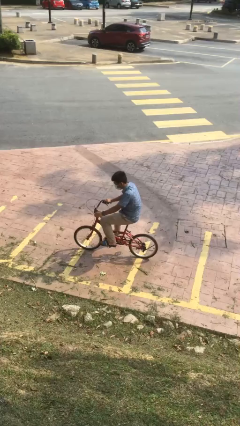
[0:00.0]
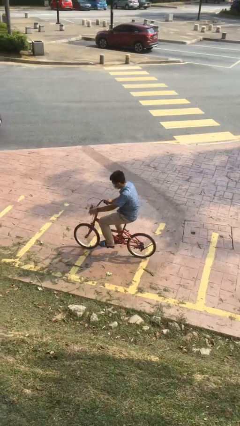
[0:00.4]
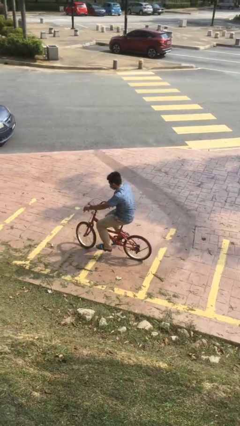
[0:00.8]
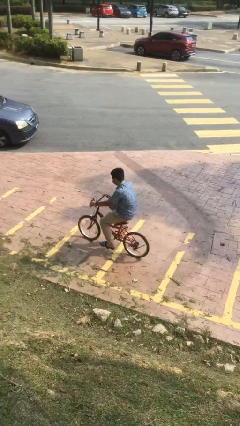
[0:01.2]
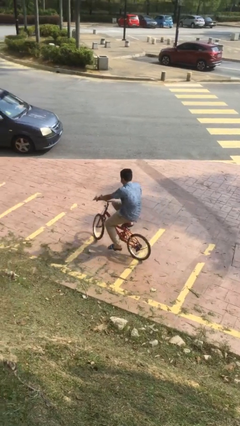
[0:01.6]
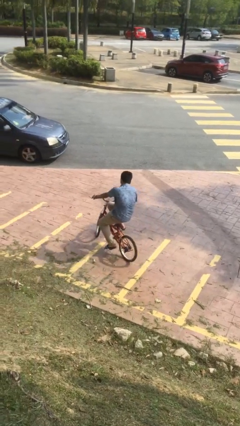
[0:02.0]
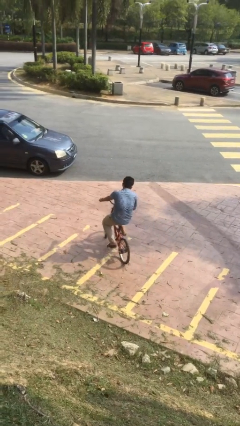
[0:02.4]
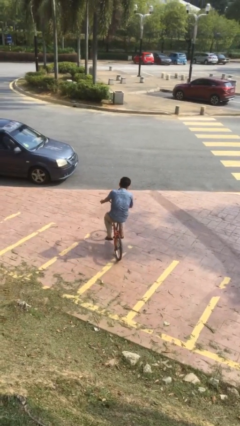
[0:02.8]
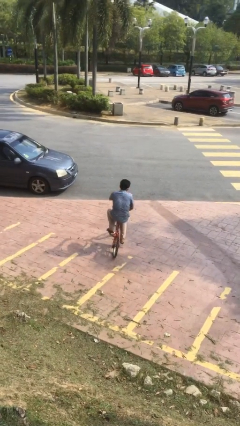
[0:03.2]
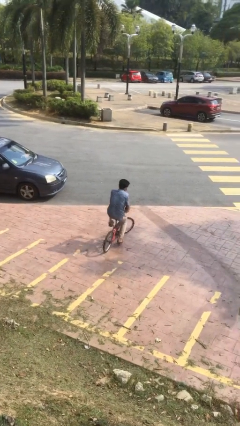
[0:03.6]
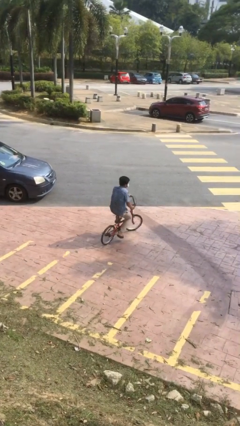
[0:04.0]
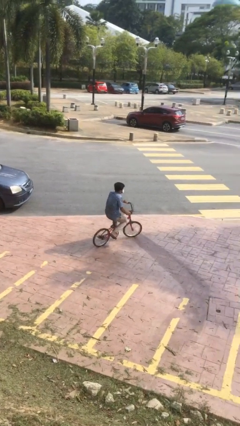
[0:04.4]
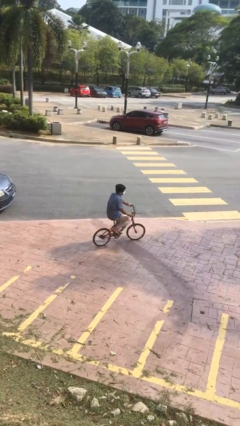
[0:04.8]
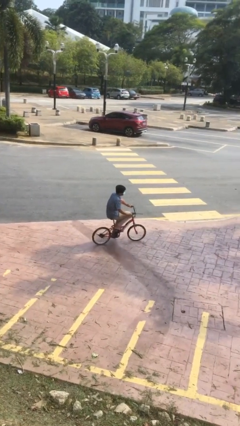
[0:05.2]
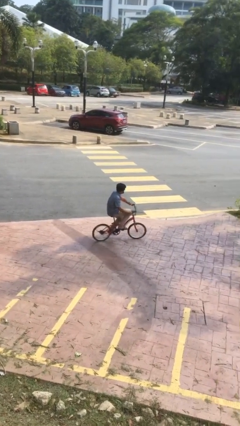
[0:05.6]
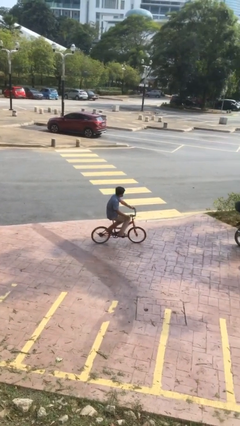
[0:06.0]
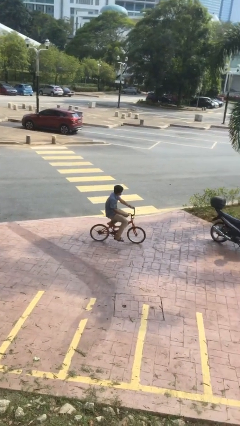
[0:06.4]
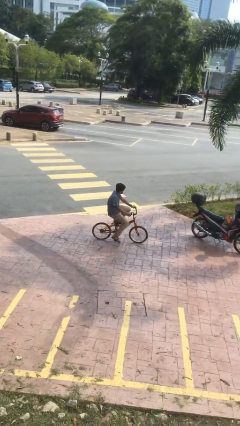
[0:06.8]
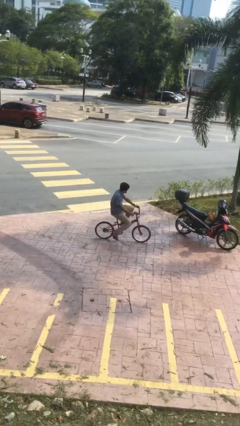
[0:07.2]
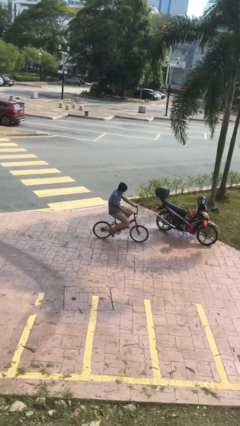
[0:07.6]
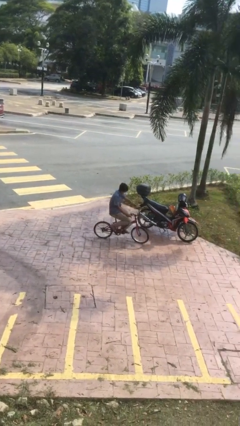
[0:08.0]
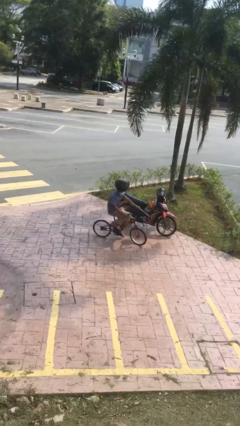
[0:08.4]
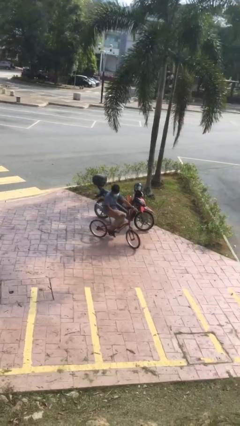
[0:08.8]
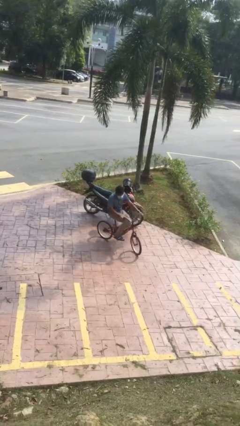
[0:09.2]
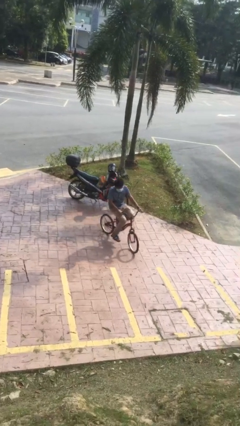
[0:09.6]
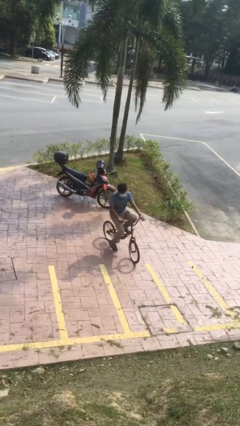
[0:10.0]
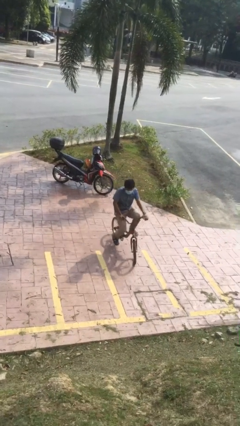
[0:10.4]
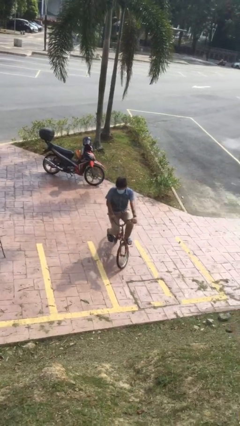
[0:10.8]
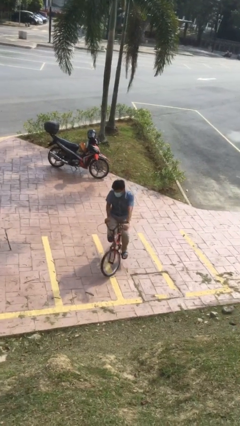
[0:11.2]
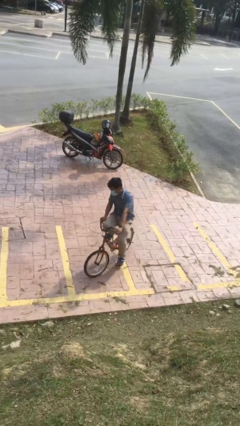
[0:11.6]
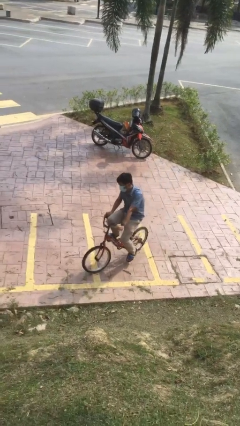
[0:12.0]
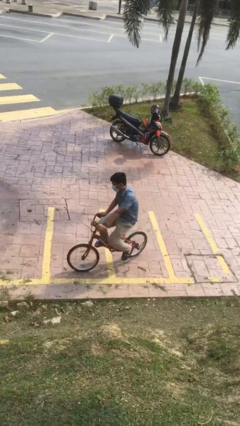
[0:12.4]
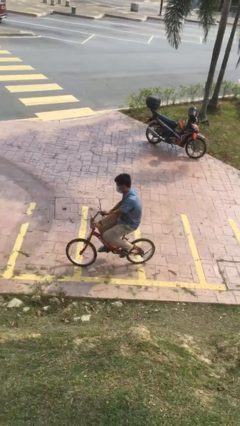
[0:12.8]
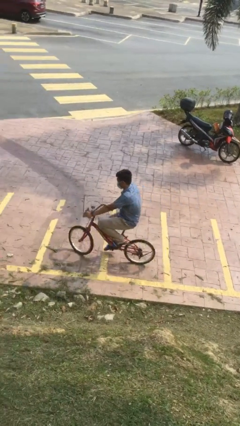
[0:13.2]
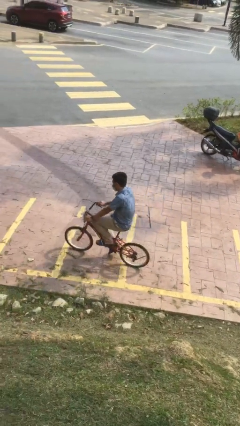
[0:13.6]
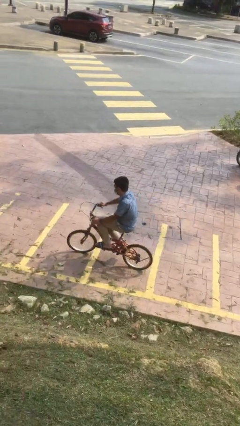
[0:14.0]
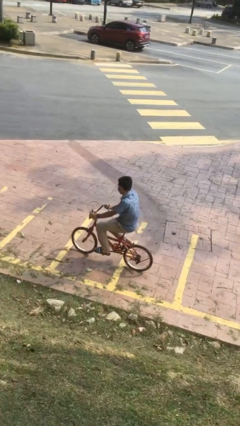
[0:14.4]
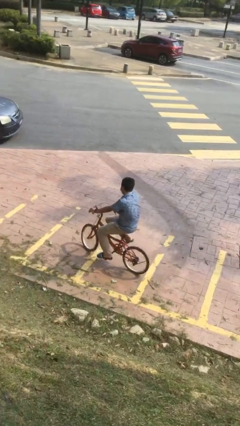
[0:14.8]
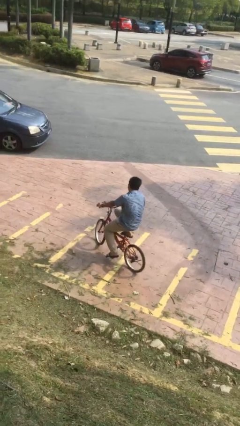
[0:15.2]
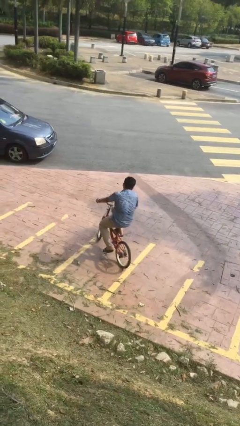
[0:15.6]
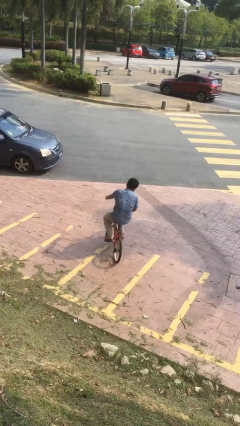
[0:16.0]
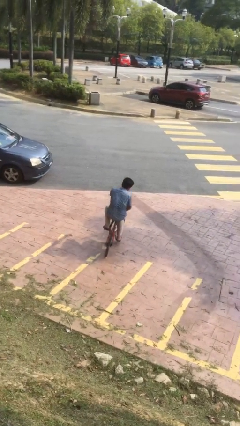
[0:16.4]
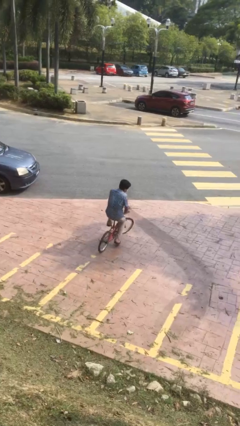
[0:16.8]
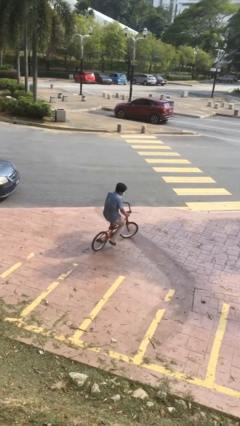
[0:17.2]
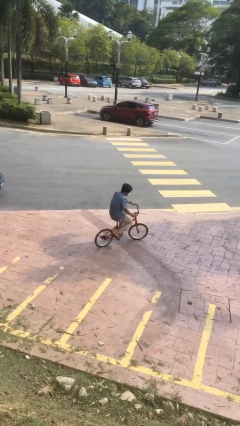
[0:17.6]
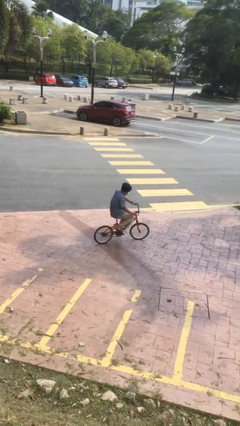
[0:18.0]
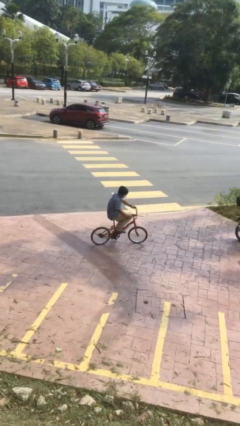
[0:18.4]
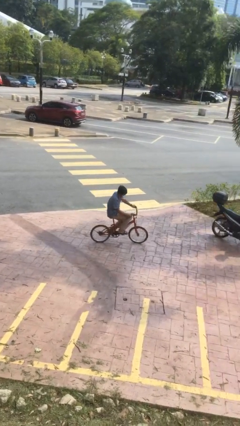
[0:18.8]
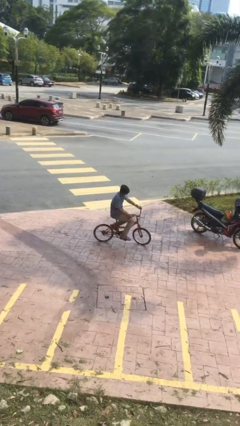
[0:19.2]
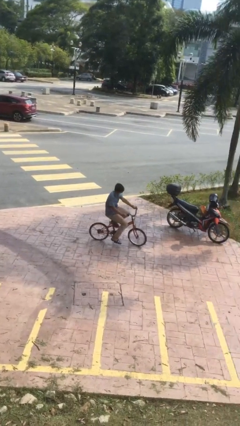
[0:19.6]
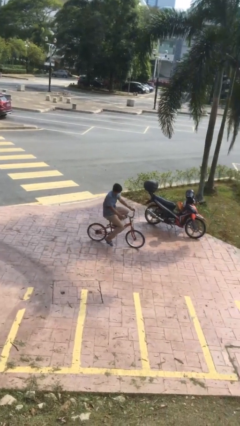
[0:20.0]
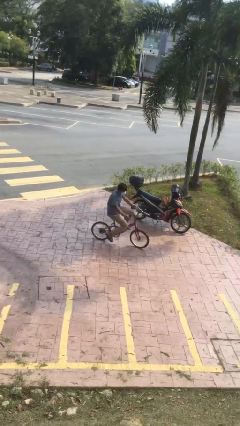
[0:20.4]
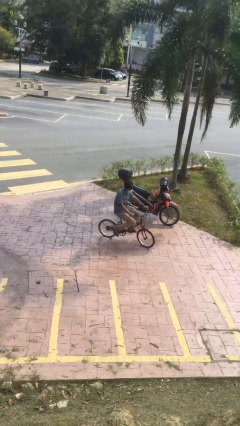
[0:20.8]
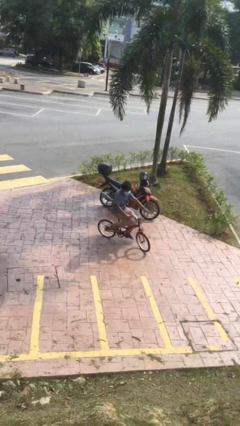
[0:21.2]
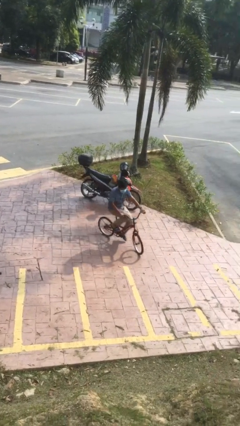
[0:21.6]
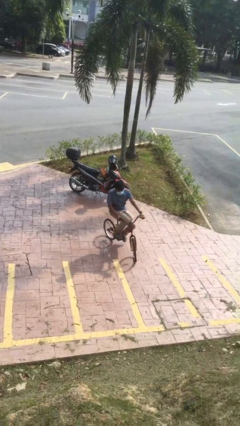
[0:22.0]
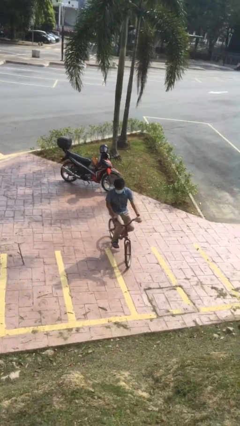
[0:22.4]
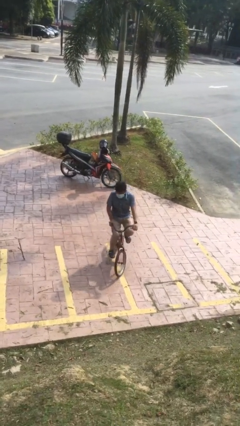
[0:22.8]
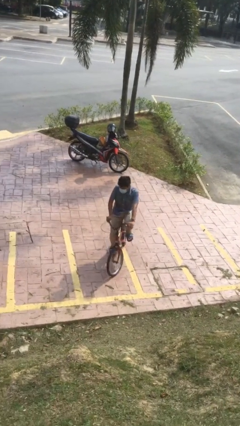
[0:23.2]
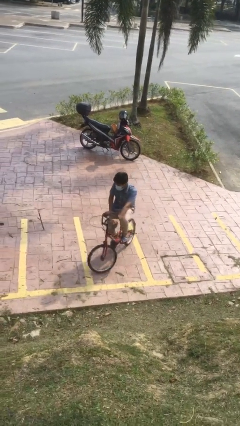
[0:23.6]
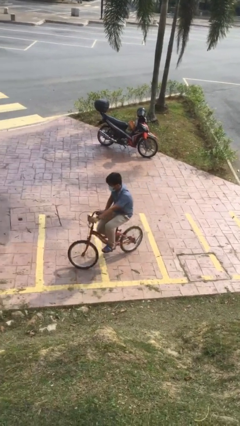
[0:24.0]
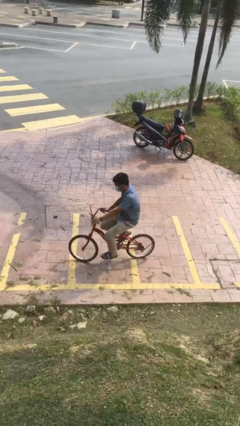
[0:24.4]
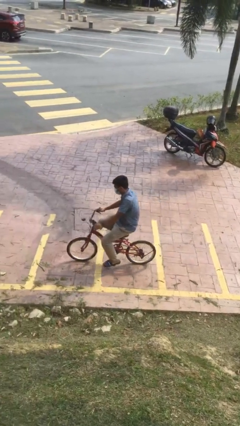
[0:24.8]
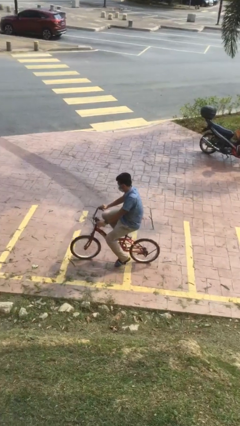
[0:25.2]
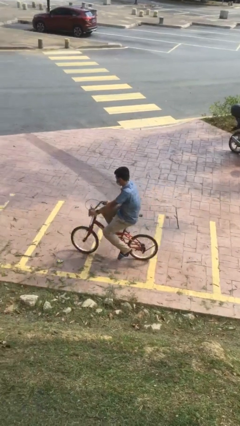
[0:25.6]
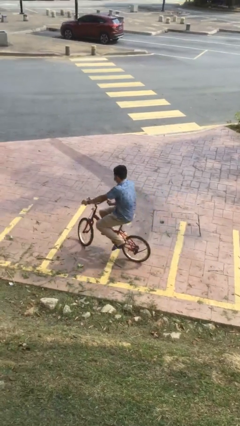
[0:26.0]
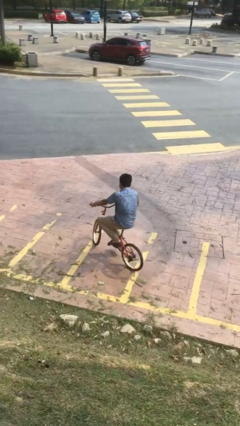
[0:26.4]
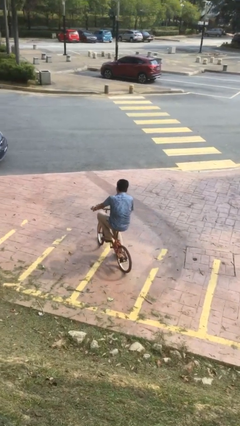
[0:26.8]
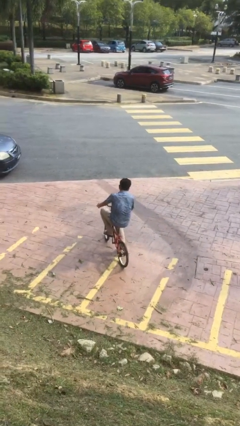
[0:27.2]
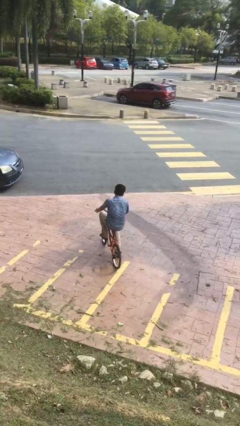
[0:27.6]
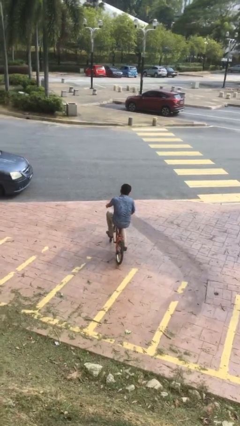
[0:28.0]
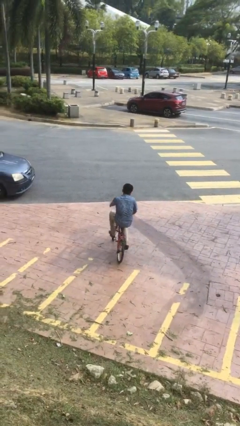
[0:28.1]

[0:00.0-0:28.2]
person rides bicycle

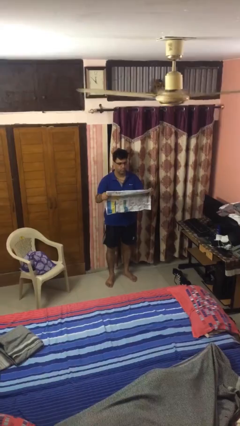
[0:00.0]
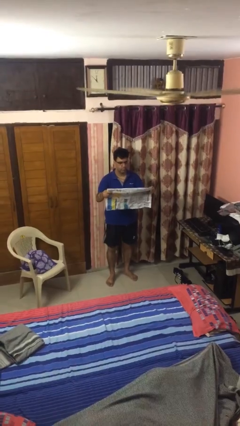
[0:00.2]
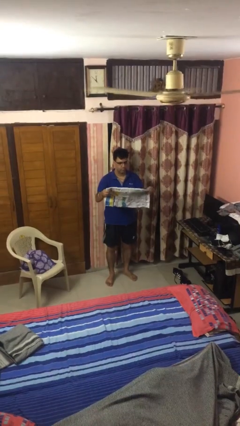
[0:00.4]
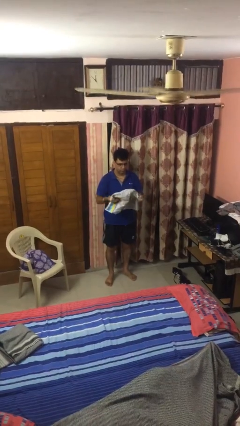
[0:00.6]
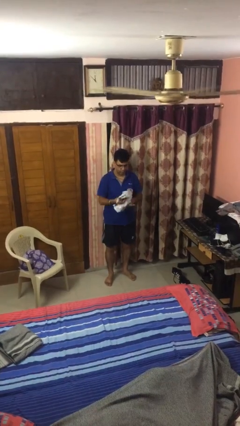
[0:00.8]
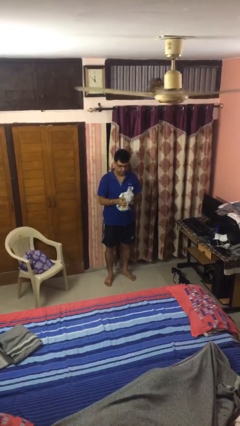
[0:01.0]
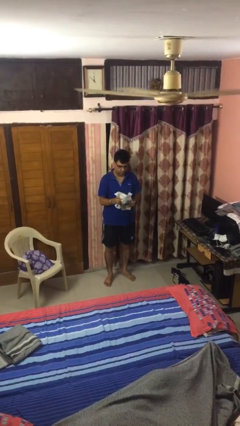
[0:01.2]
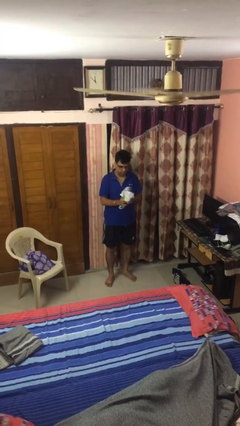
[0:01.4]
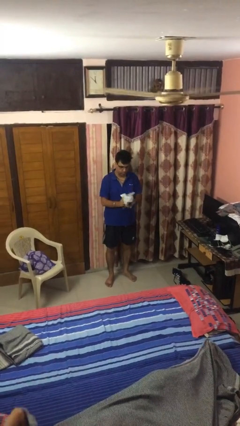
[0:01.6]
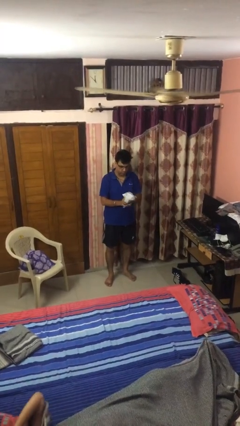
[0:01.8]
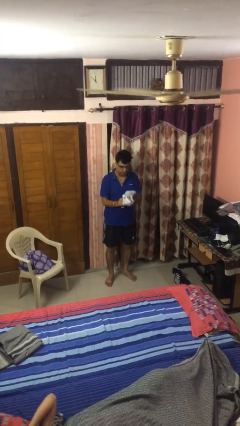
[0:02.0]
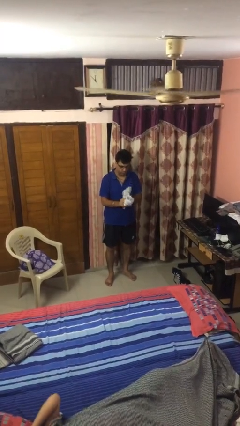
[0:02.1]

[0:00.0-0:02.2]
person crumples paper

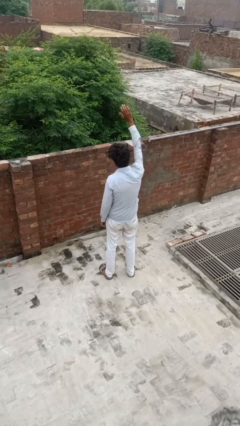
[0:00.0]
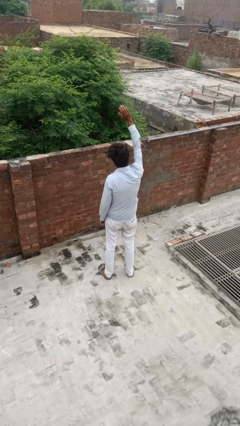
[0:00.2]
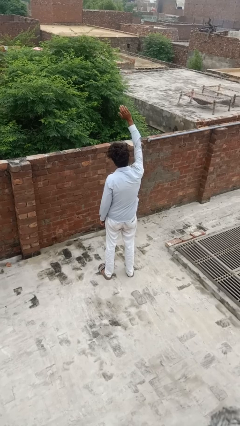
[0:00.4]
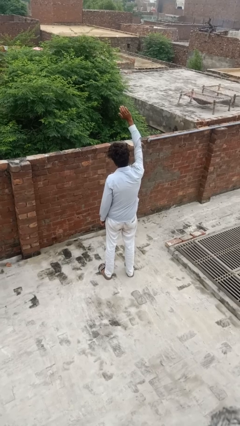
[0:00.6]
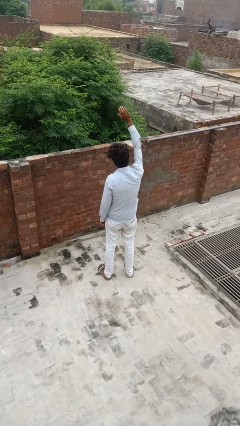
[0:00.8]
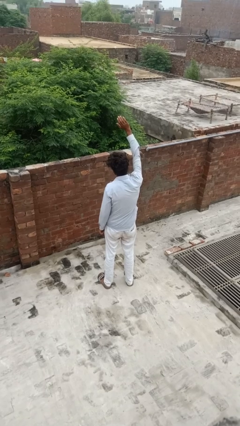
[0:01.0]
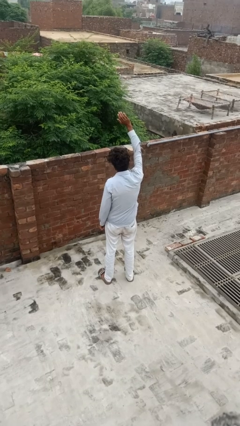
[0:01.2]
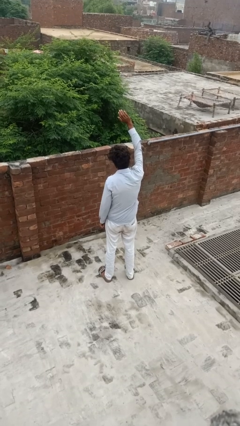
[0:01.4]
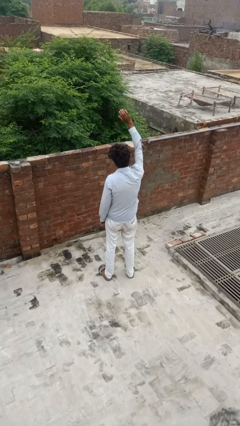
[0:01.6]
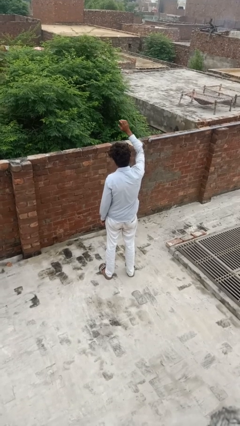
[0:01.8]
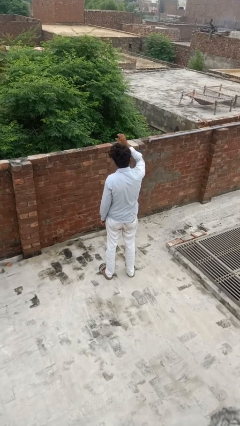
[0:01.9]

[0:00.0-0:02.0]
person gestures raise hand
